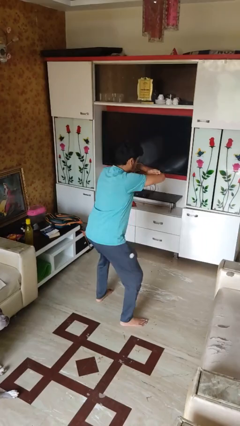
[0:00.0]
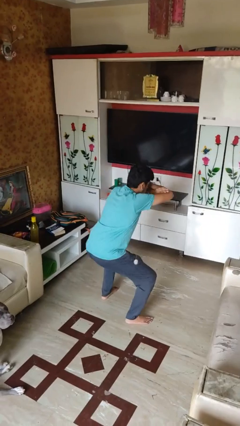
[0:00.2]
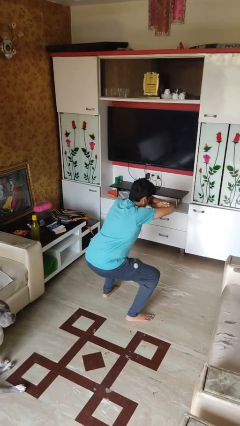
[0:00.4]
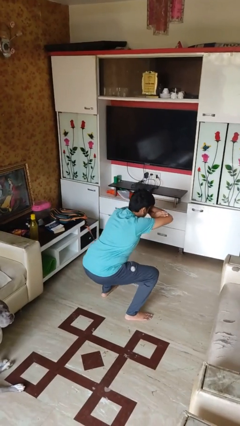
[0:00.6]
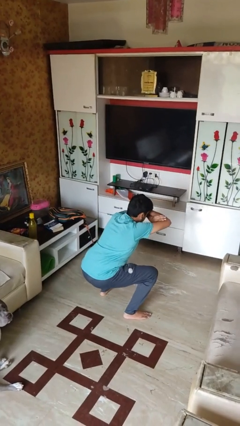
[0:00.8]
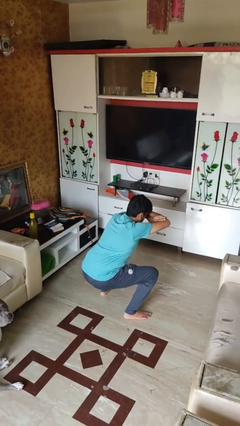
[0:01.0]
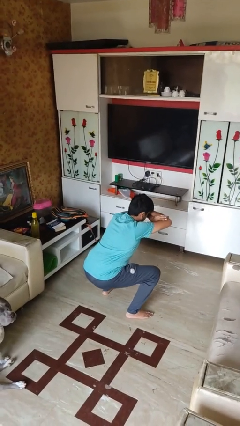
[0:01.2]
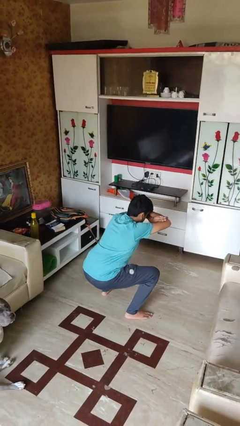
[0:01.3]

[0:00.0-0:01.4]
person squats

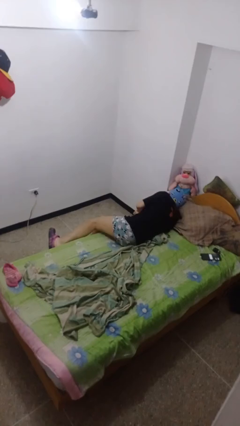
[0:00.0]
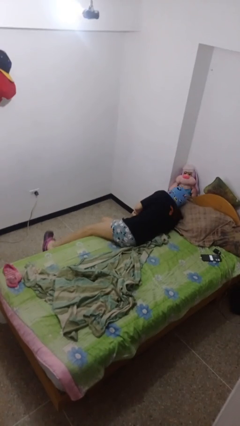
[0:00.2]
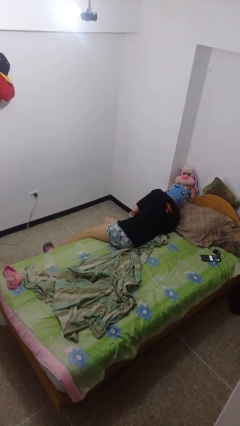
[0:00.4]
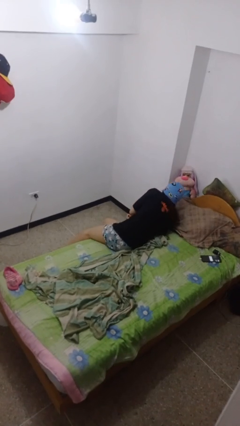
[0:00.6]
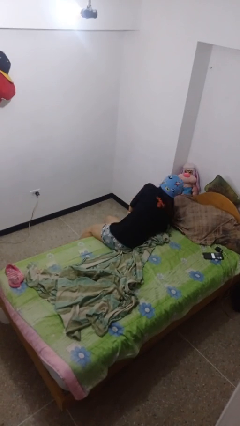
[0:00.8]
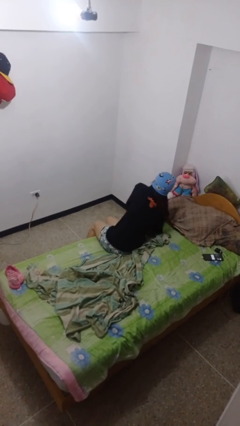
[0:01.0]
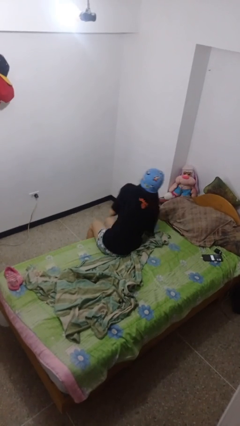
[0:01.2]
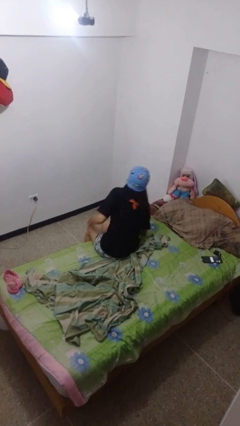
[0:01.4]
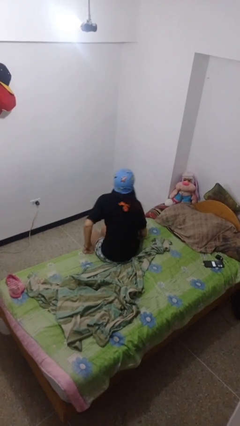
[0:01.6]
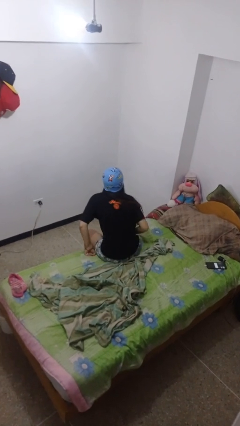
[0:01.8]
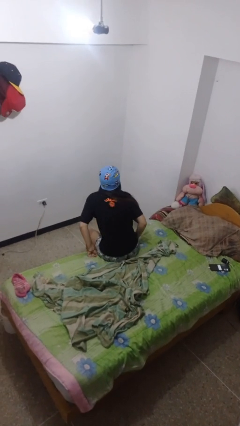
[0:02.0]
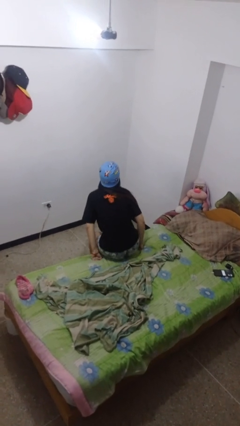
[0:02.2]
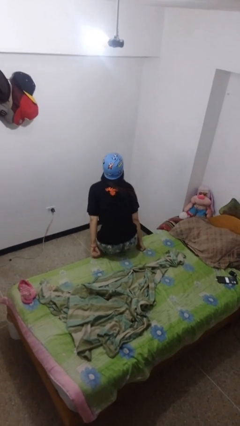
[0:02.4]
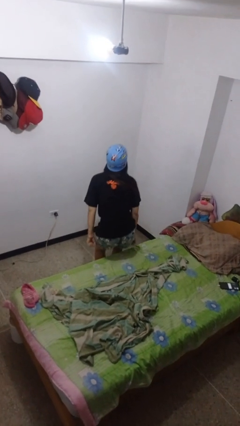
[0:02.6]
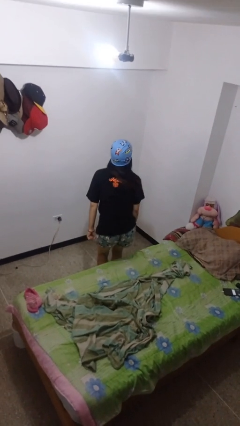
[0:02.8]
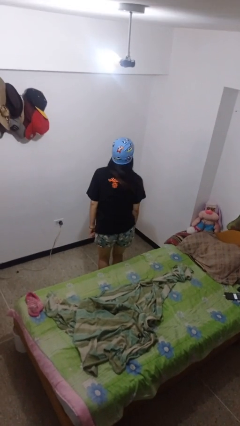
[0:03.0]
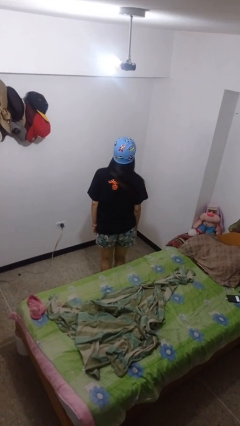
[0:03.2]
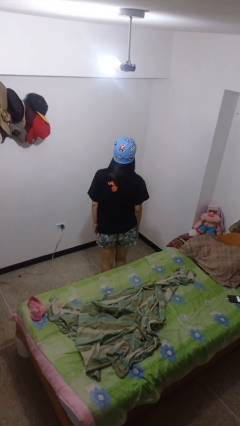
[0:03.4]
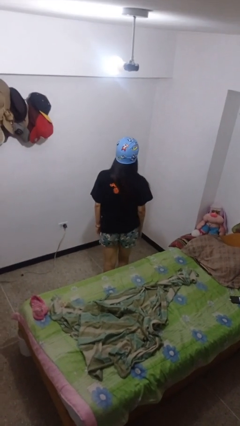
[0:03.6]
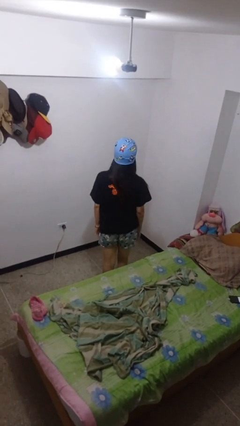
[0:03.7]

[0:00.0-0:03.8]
person stands up

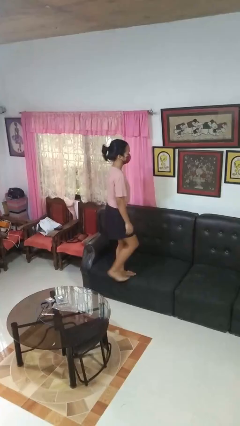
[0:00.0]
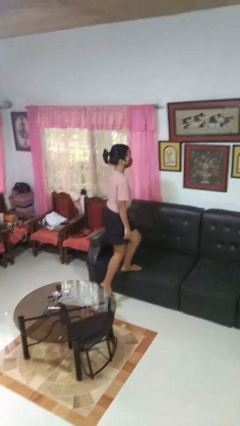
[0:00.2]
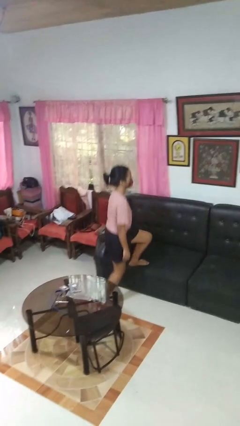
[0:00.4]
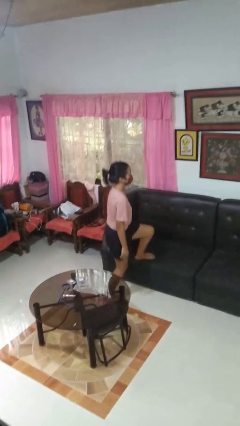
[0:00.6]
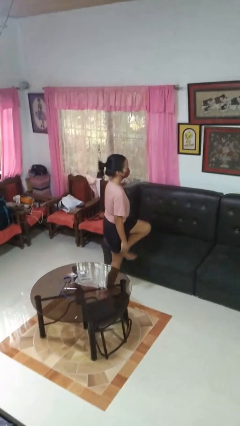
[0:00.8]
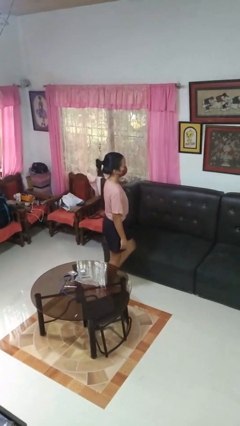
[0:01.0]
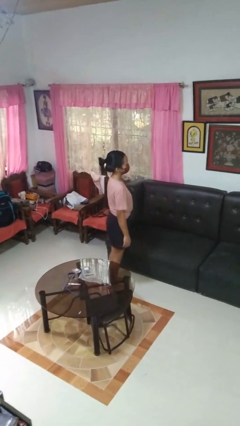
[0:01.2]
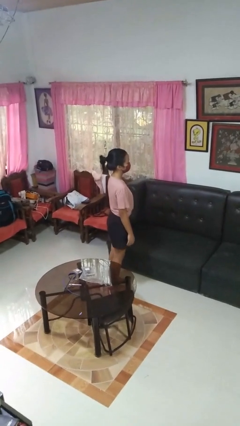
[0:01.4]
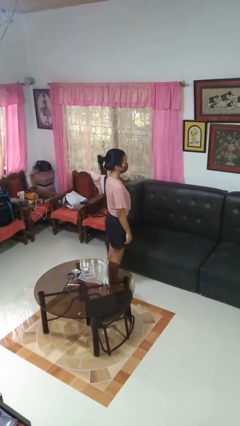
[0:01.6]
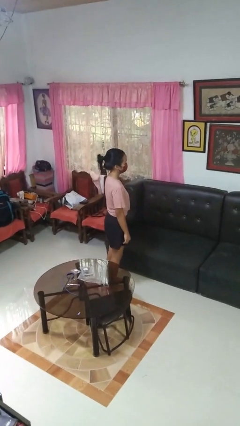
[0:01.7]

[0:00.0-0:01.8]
person climbs off couch

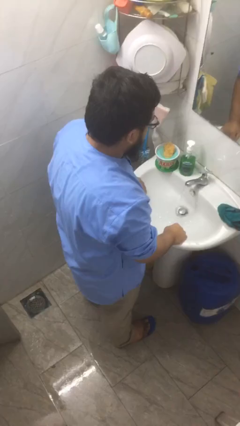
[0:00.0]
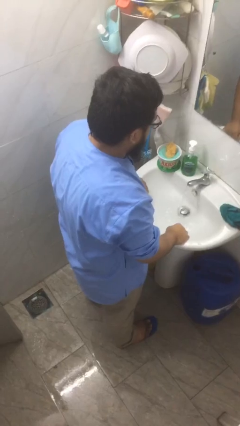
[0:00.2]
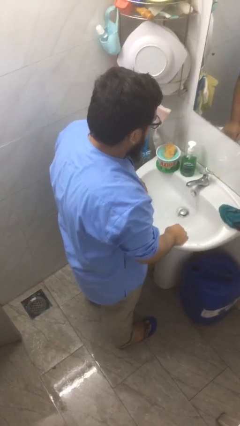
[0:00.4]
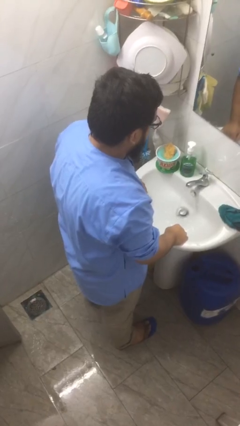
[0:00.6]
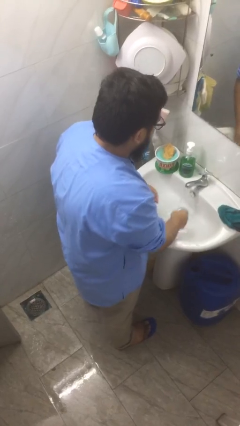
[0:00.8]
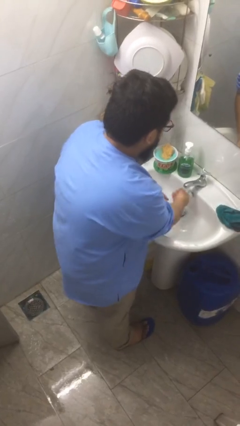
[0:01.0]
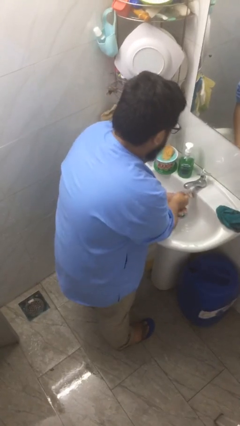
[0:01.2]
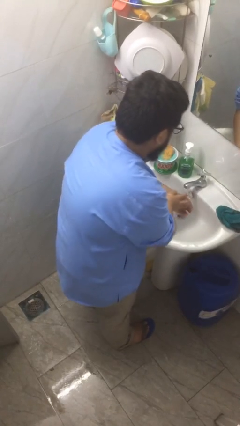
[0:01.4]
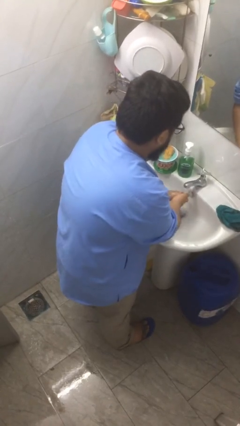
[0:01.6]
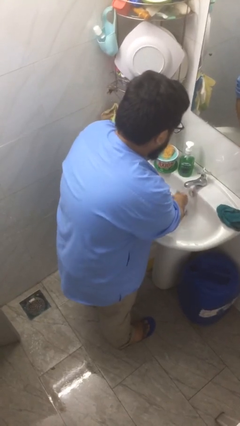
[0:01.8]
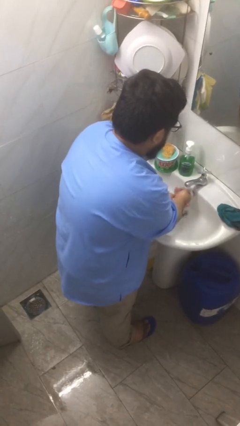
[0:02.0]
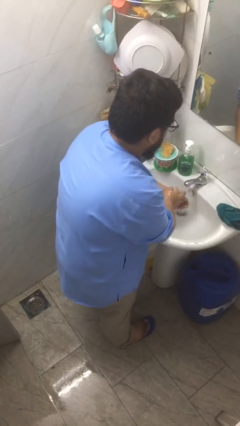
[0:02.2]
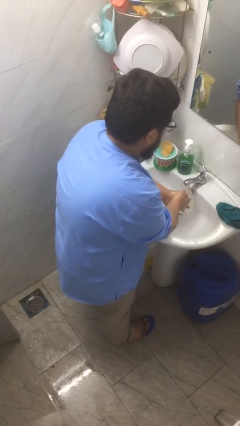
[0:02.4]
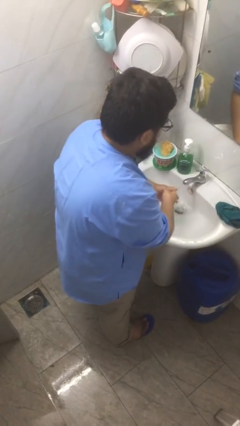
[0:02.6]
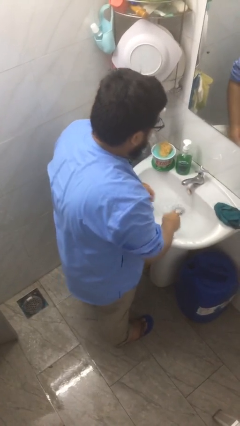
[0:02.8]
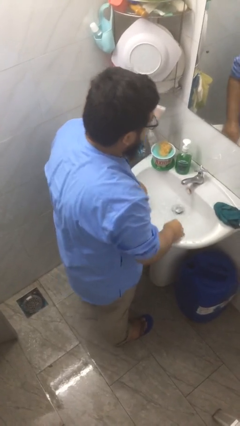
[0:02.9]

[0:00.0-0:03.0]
person washes hands

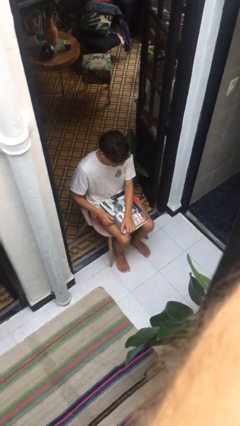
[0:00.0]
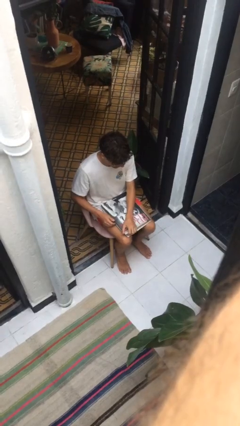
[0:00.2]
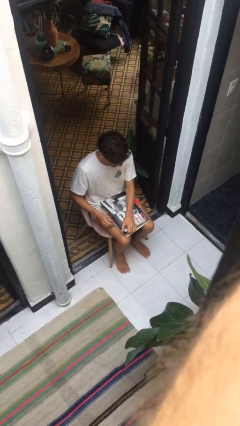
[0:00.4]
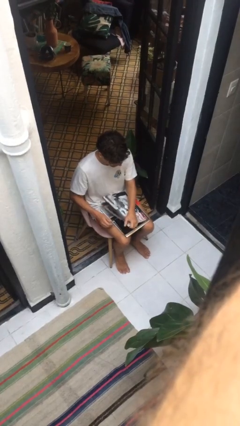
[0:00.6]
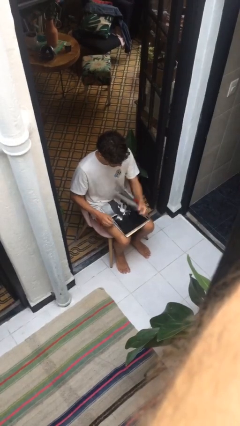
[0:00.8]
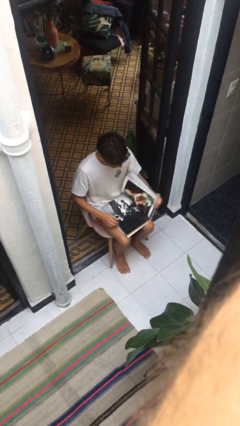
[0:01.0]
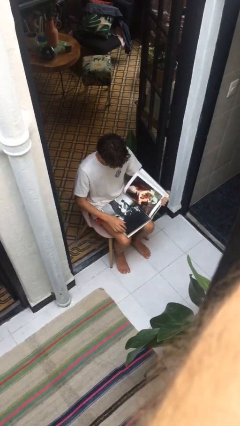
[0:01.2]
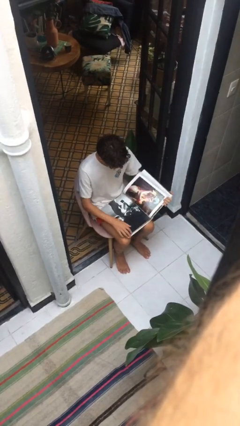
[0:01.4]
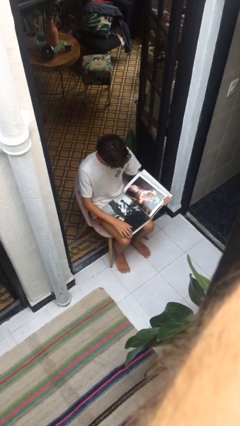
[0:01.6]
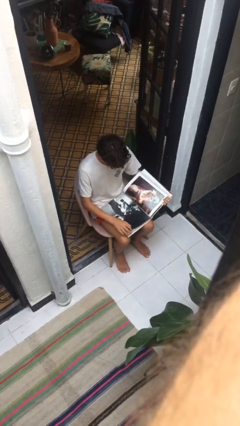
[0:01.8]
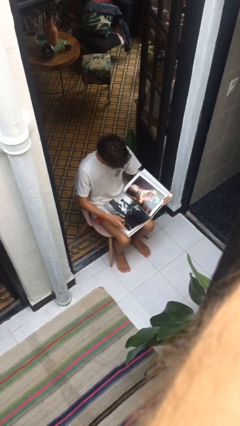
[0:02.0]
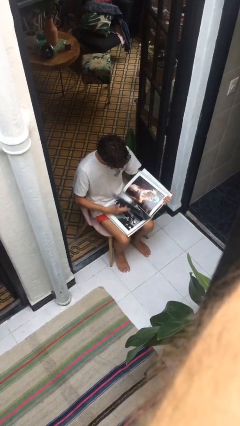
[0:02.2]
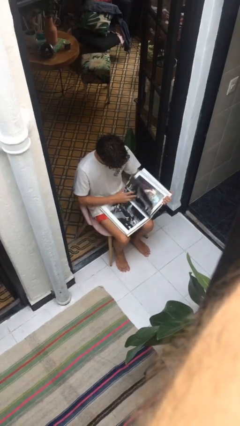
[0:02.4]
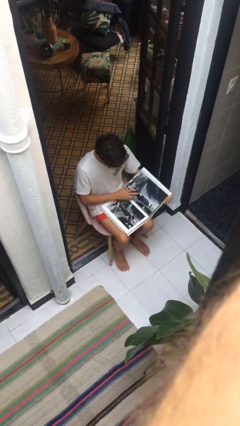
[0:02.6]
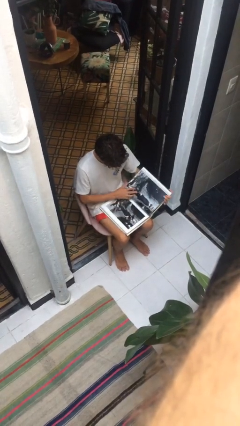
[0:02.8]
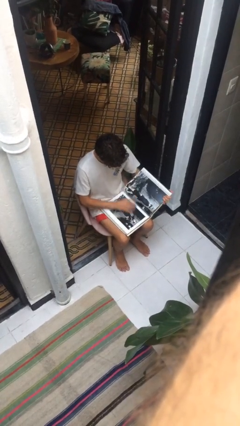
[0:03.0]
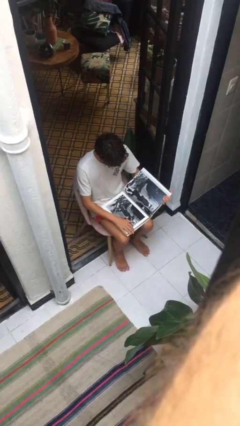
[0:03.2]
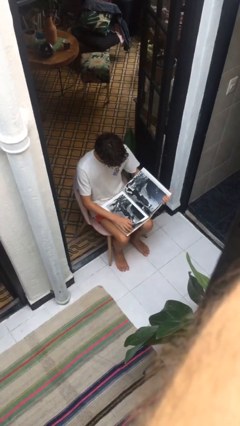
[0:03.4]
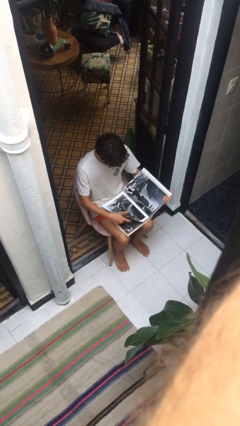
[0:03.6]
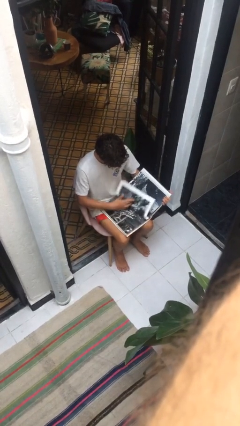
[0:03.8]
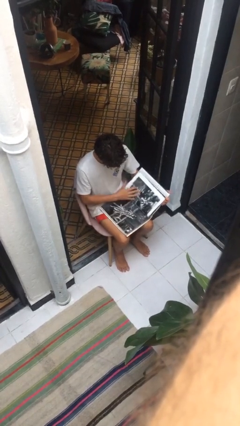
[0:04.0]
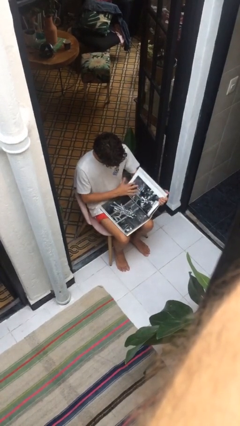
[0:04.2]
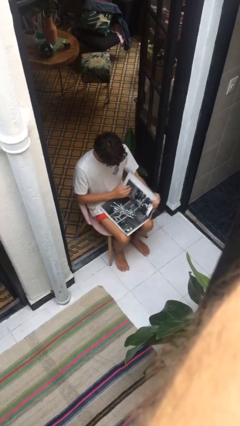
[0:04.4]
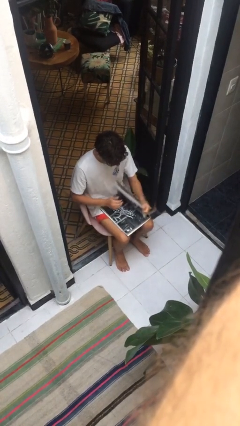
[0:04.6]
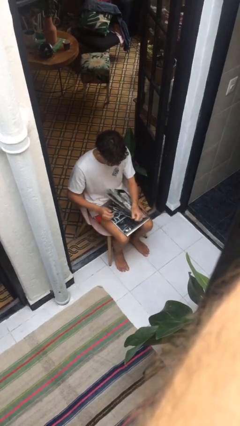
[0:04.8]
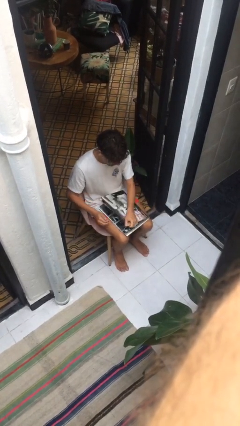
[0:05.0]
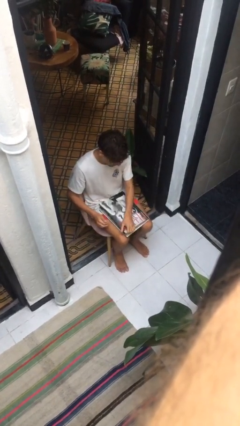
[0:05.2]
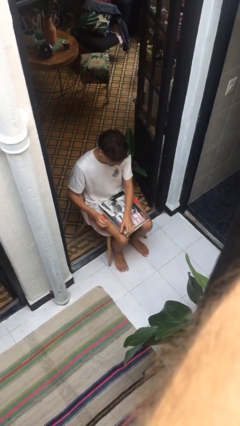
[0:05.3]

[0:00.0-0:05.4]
person reads document

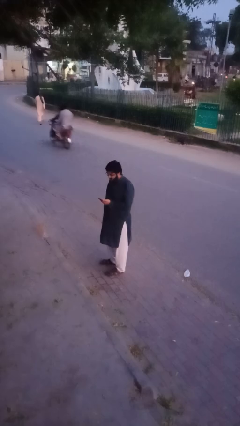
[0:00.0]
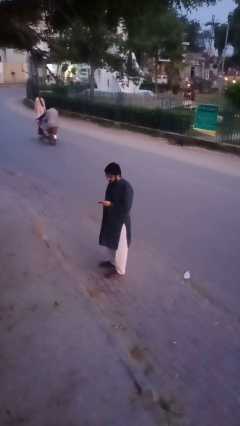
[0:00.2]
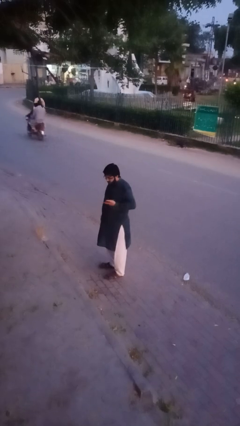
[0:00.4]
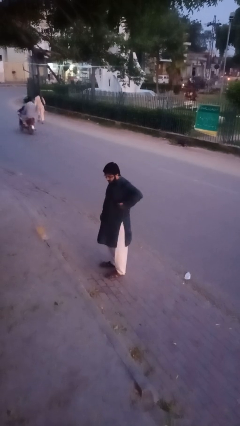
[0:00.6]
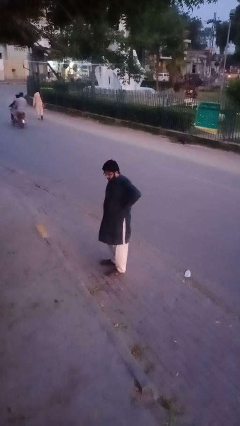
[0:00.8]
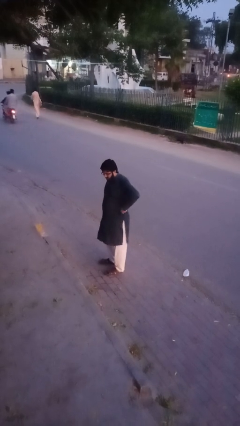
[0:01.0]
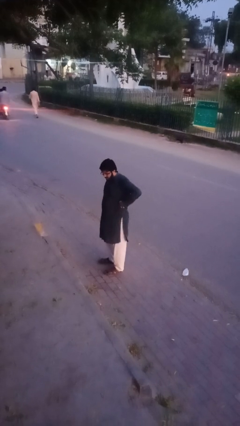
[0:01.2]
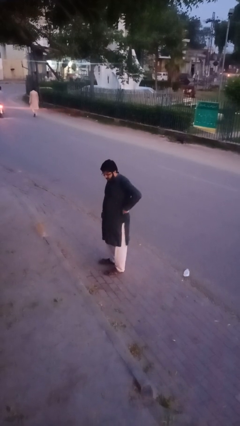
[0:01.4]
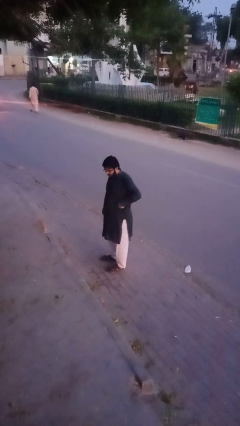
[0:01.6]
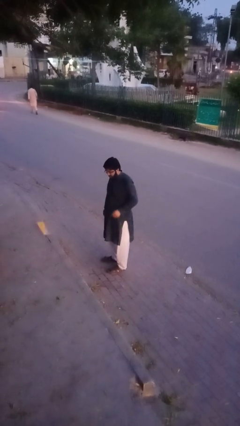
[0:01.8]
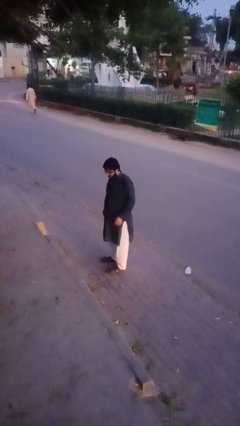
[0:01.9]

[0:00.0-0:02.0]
person puts phone into pocket
